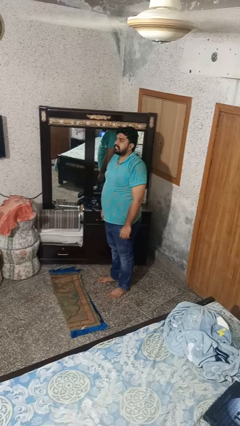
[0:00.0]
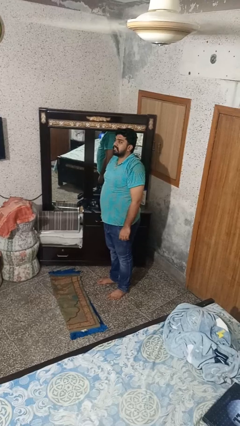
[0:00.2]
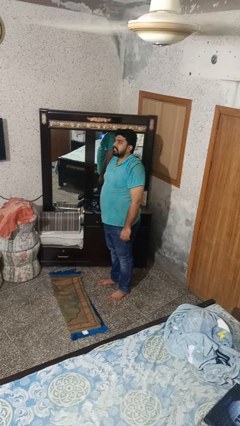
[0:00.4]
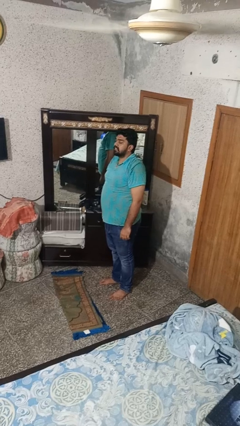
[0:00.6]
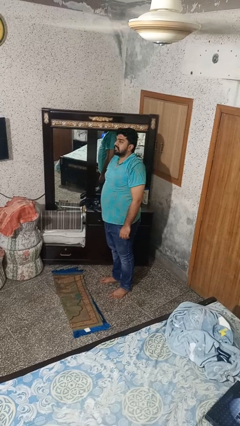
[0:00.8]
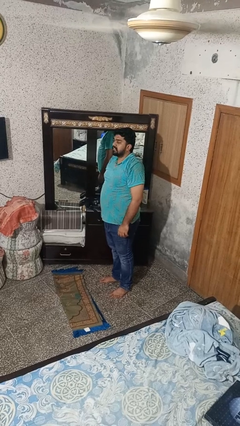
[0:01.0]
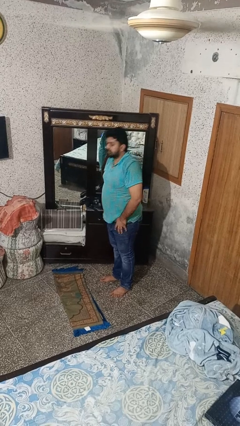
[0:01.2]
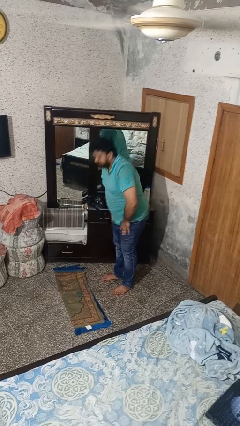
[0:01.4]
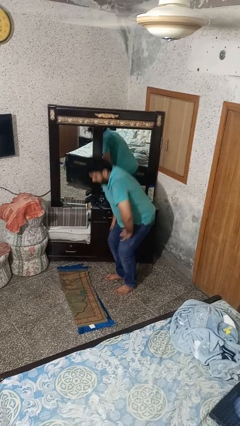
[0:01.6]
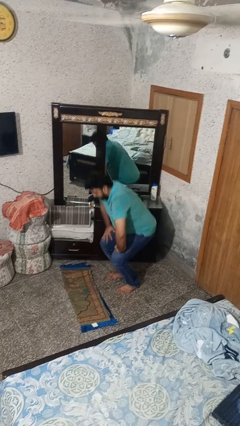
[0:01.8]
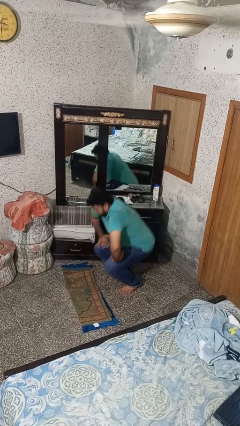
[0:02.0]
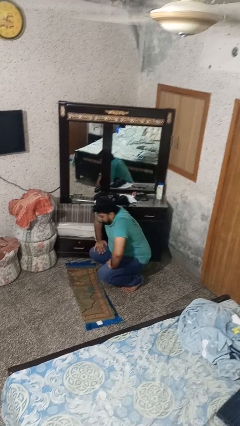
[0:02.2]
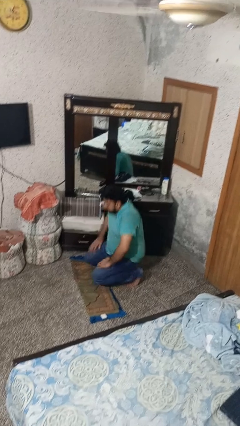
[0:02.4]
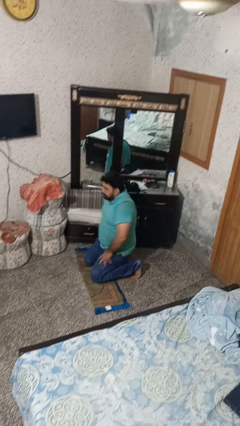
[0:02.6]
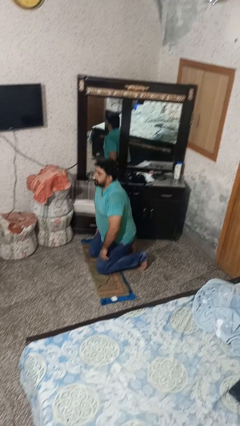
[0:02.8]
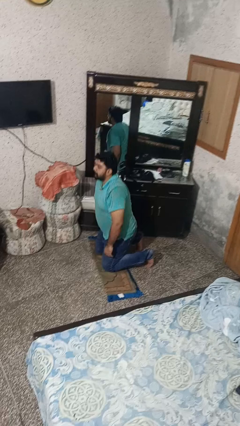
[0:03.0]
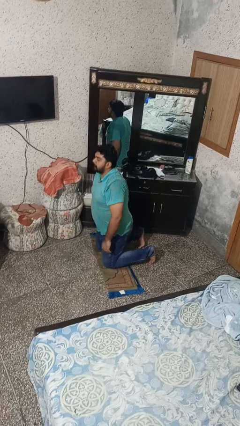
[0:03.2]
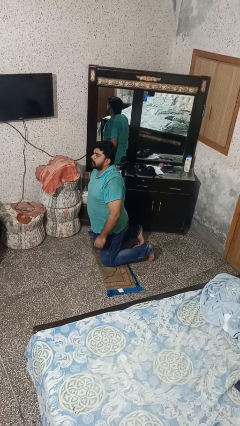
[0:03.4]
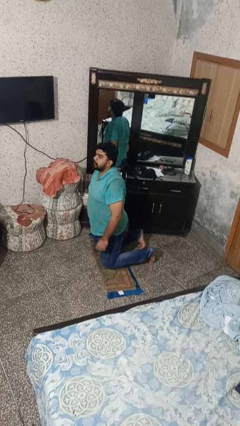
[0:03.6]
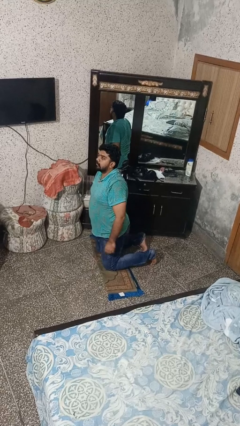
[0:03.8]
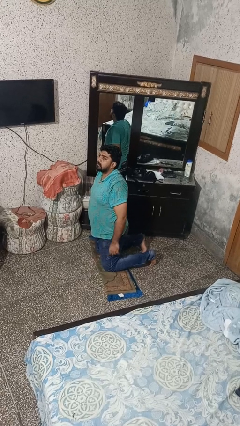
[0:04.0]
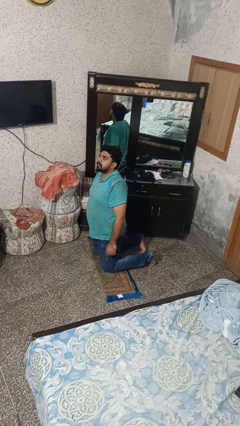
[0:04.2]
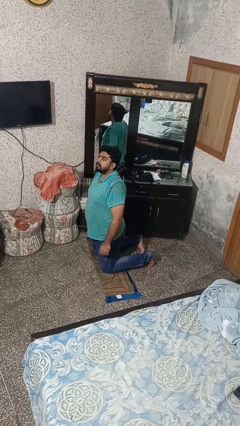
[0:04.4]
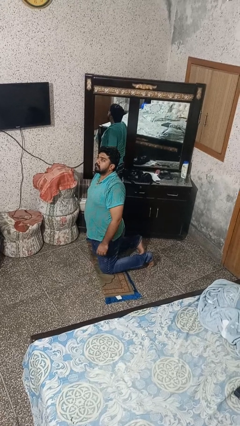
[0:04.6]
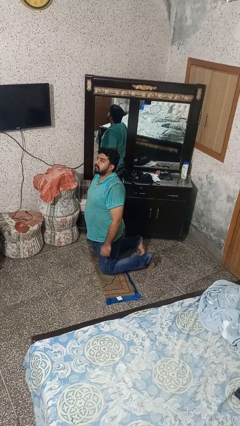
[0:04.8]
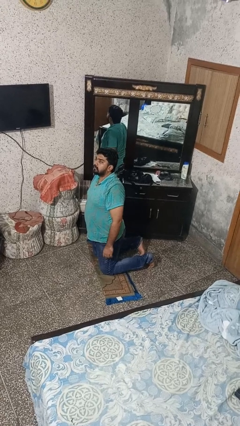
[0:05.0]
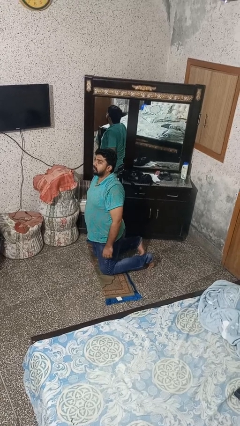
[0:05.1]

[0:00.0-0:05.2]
person kneels

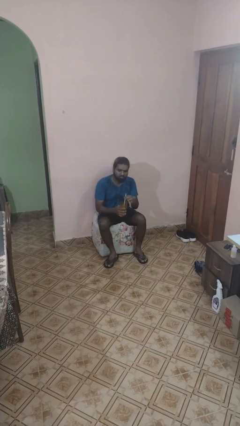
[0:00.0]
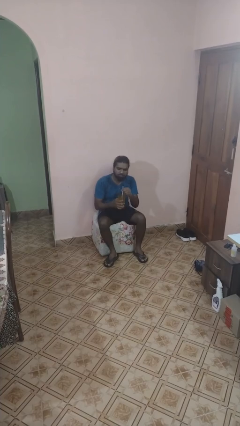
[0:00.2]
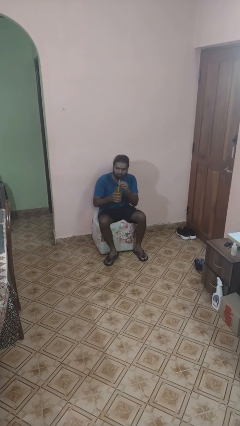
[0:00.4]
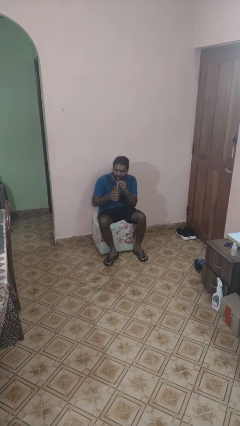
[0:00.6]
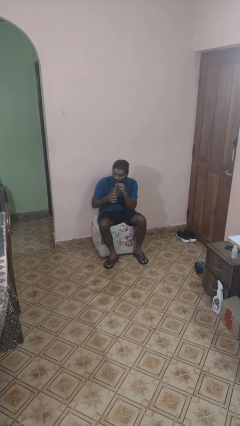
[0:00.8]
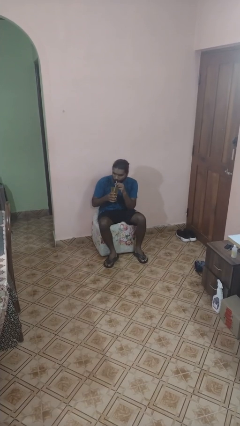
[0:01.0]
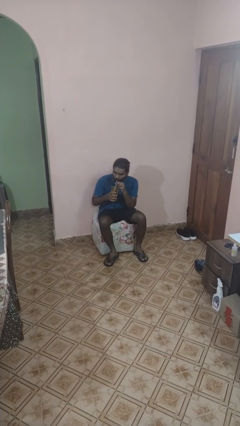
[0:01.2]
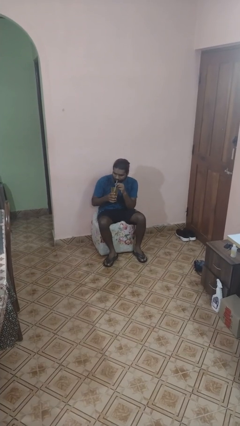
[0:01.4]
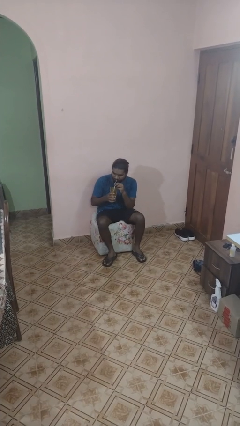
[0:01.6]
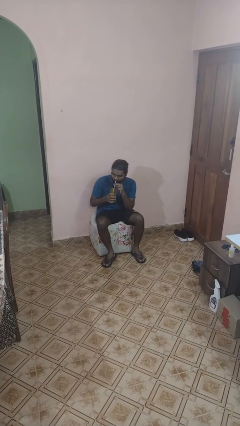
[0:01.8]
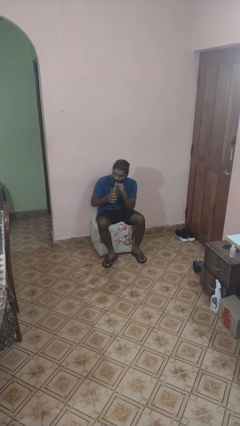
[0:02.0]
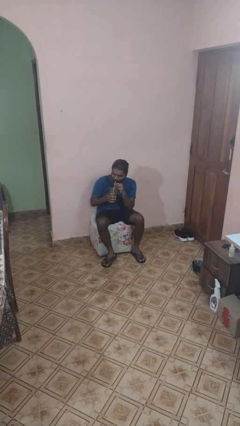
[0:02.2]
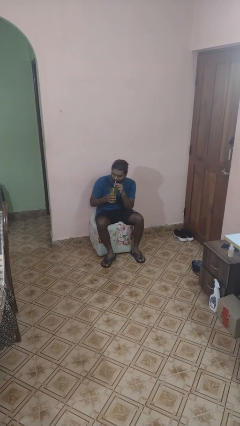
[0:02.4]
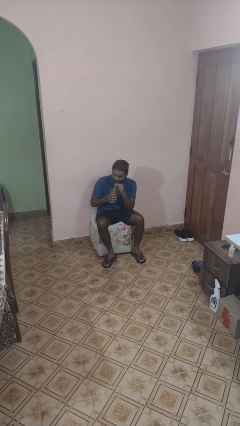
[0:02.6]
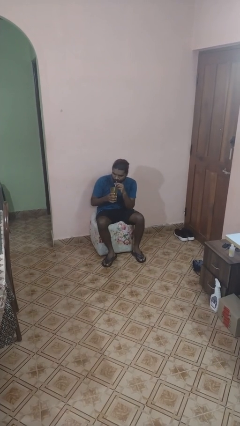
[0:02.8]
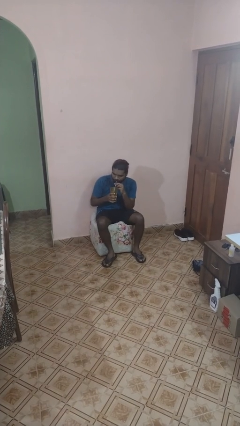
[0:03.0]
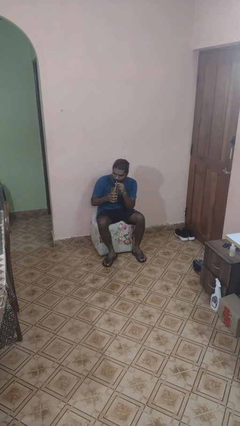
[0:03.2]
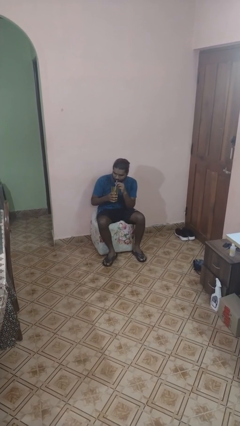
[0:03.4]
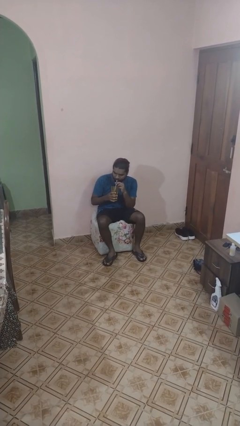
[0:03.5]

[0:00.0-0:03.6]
person drinks from straw

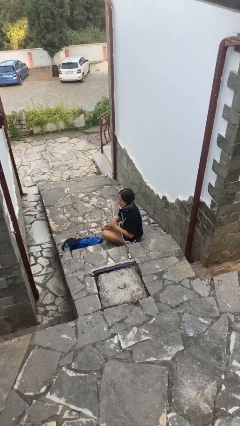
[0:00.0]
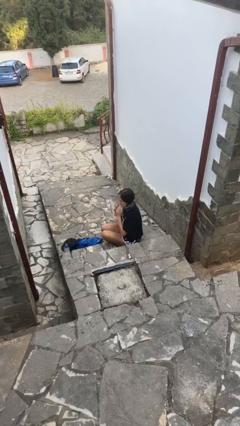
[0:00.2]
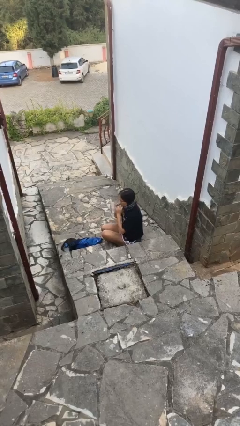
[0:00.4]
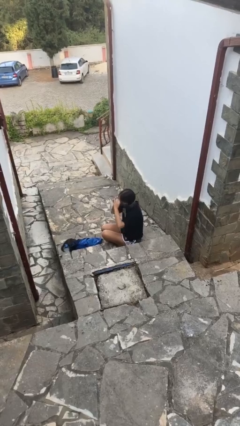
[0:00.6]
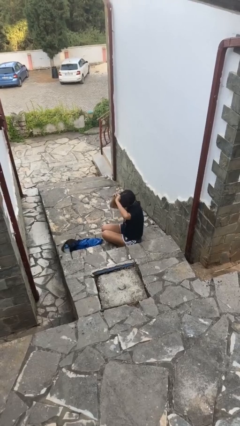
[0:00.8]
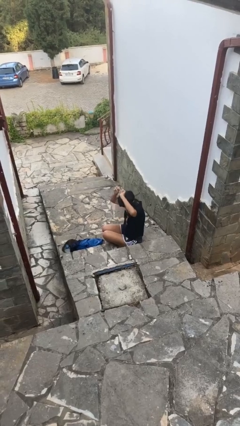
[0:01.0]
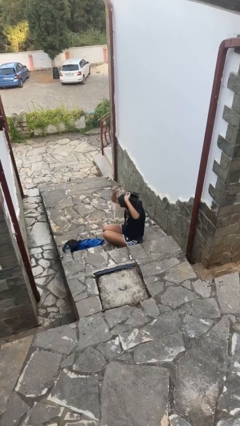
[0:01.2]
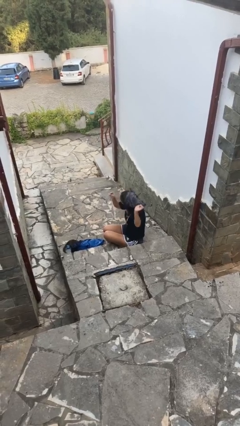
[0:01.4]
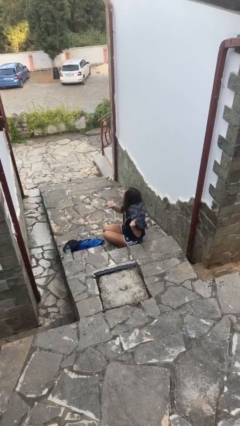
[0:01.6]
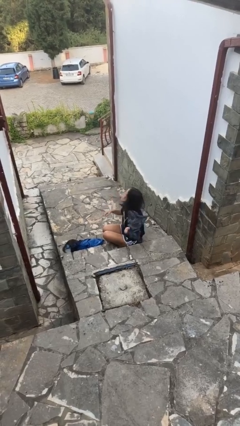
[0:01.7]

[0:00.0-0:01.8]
person takes off scarf

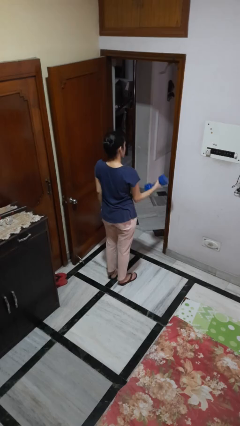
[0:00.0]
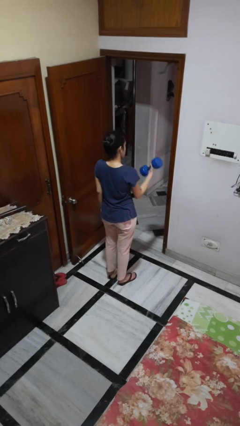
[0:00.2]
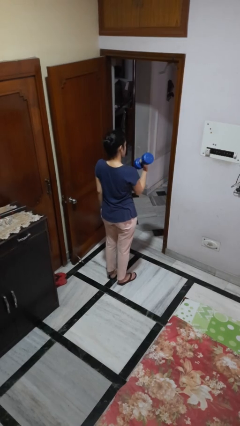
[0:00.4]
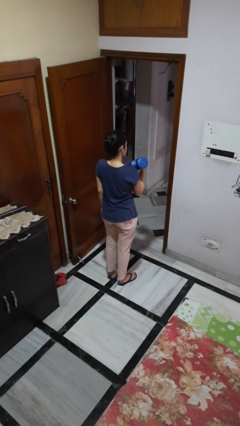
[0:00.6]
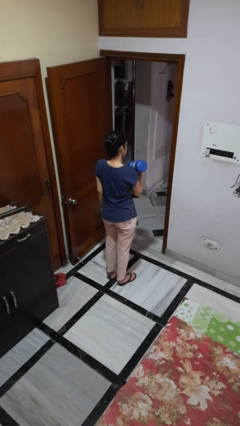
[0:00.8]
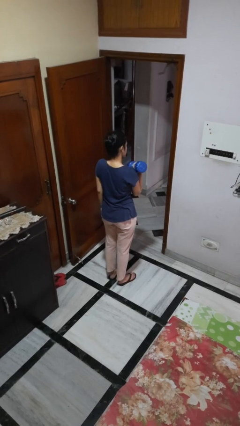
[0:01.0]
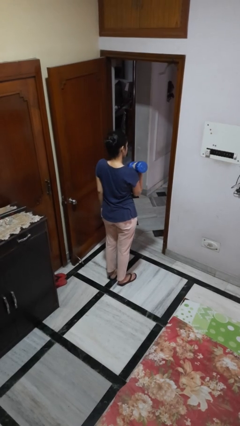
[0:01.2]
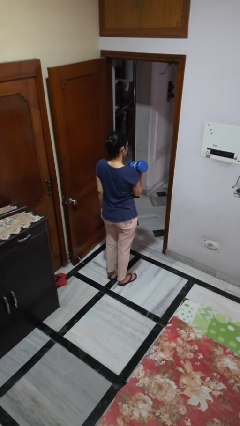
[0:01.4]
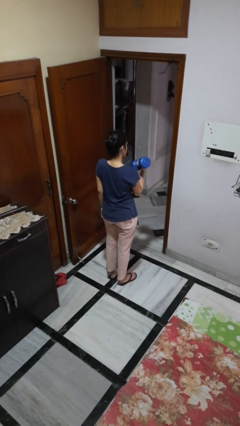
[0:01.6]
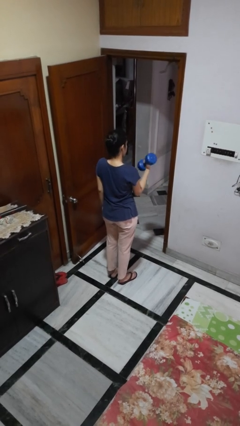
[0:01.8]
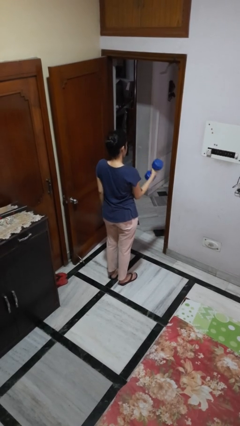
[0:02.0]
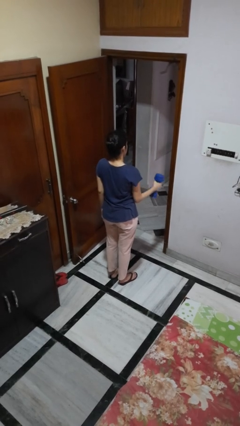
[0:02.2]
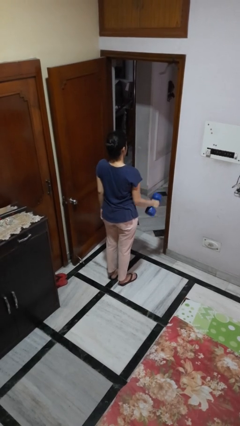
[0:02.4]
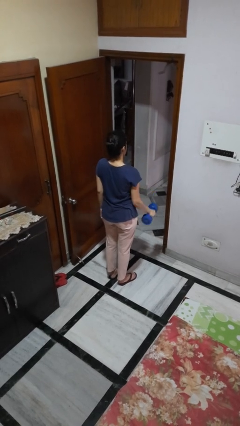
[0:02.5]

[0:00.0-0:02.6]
person lifts dumbbells

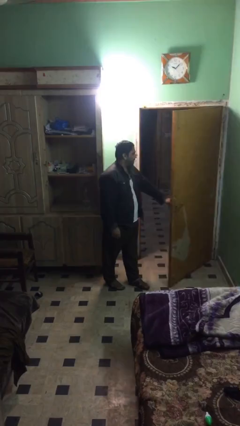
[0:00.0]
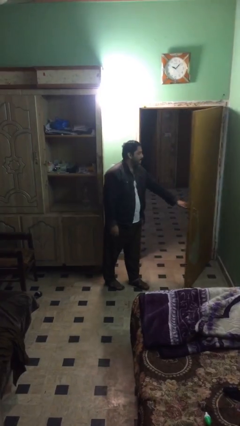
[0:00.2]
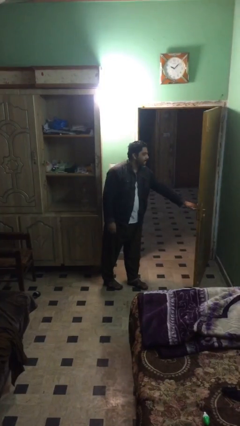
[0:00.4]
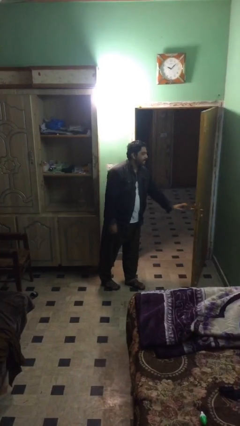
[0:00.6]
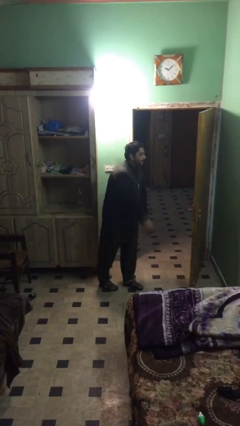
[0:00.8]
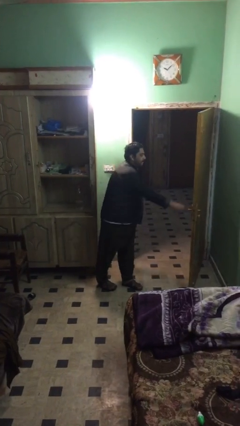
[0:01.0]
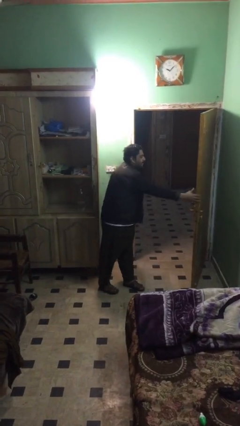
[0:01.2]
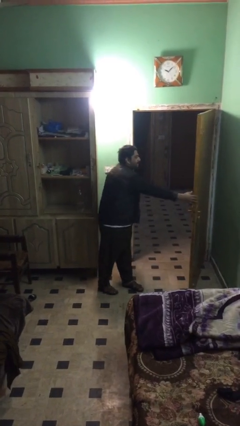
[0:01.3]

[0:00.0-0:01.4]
person closes facility door

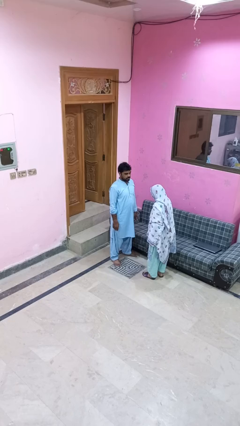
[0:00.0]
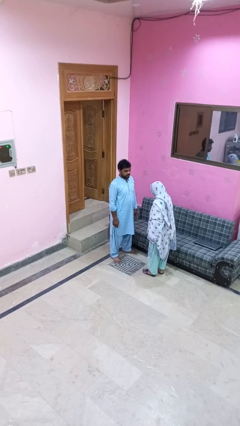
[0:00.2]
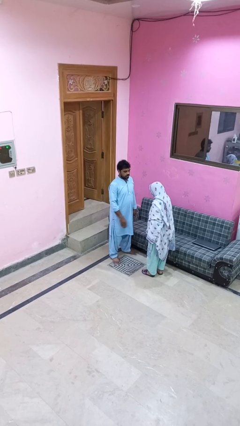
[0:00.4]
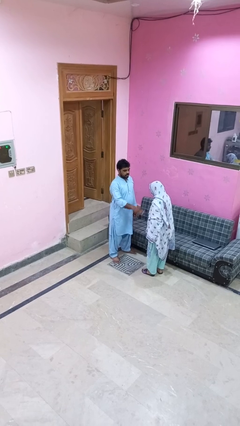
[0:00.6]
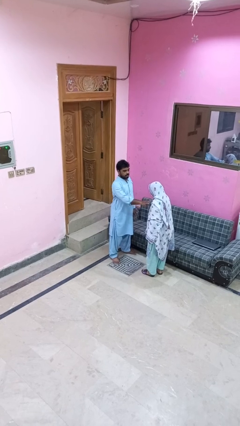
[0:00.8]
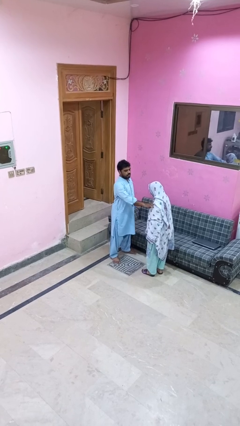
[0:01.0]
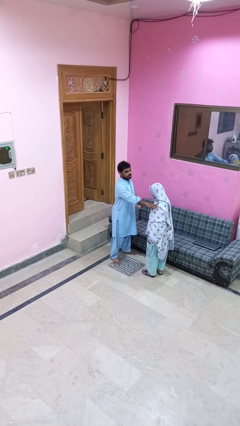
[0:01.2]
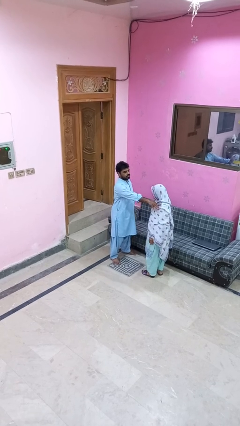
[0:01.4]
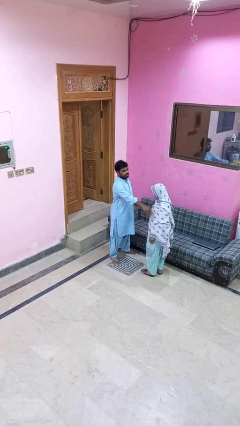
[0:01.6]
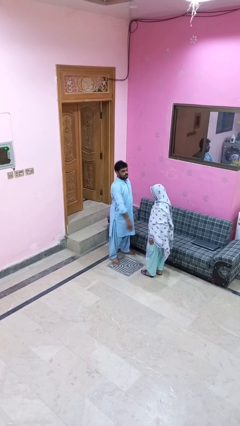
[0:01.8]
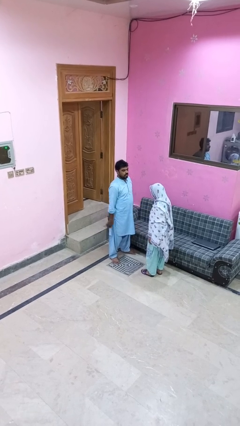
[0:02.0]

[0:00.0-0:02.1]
person shoves person

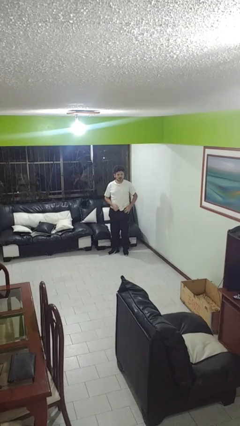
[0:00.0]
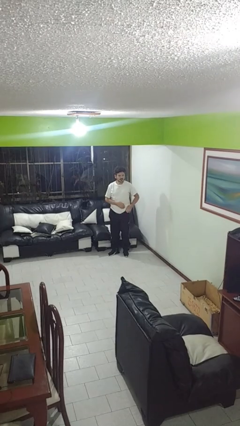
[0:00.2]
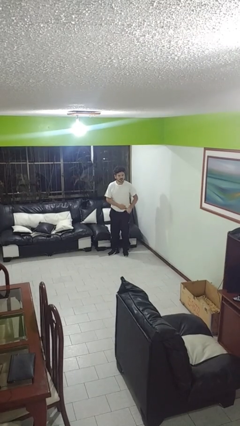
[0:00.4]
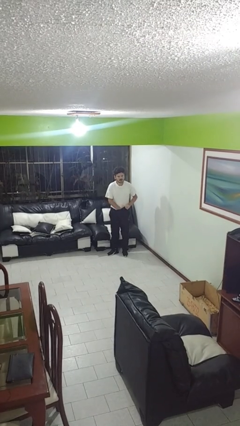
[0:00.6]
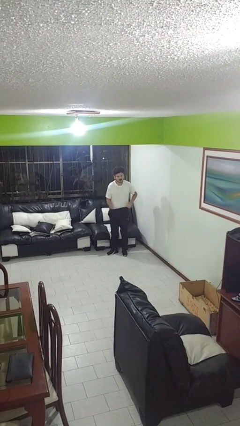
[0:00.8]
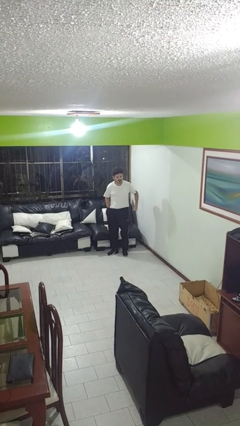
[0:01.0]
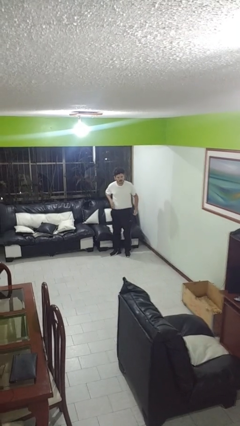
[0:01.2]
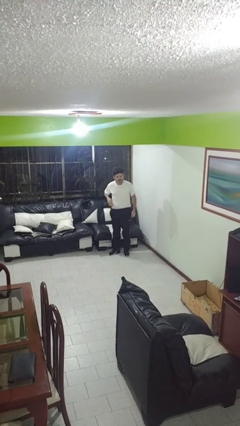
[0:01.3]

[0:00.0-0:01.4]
person tucks in shirt
